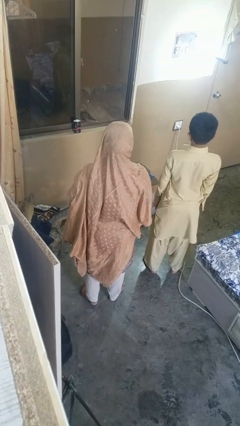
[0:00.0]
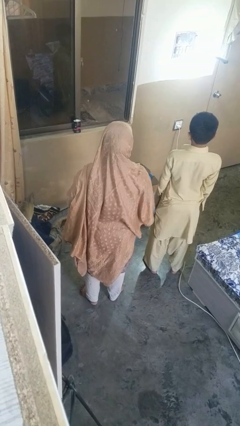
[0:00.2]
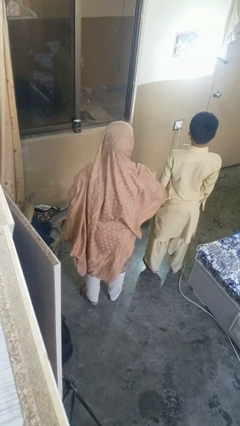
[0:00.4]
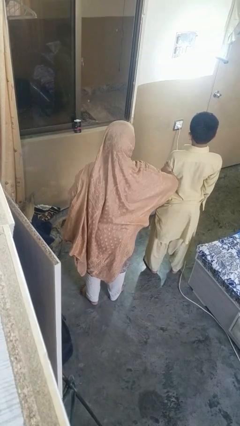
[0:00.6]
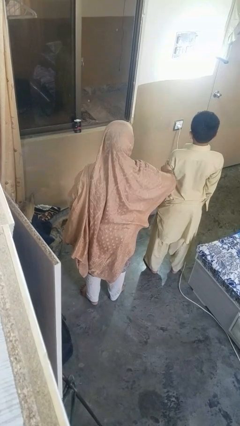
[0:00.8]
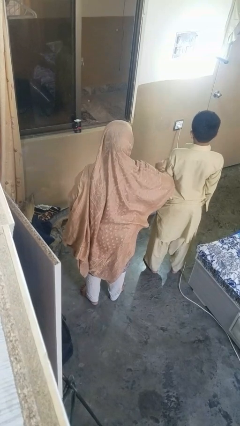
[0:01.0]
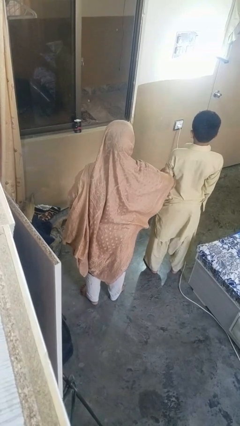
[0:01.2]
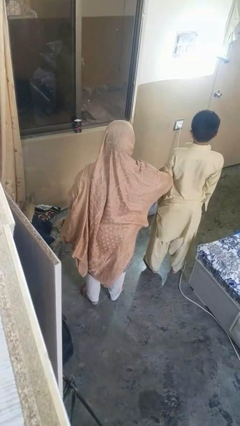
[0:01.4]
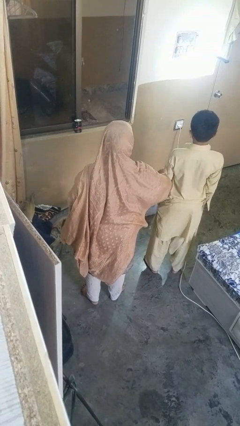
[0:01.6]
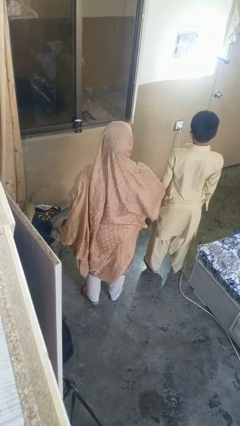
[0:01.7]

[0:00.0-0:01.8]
person grabs person by bicep

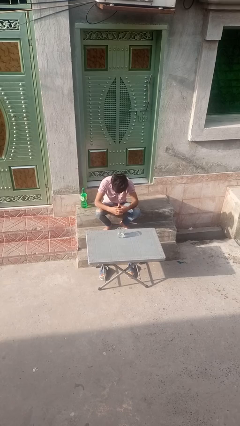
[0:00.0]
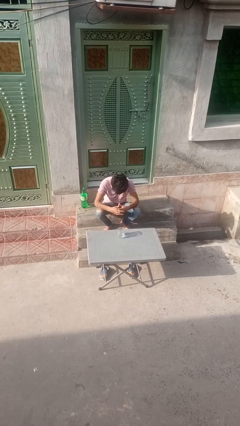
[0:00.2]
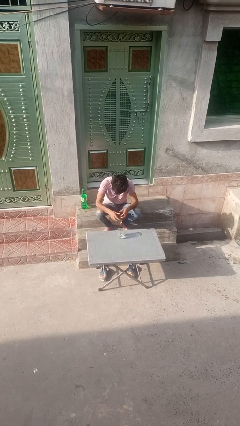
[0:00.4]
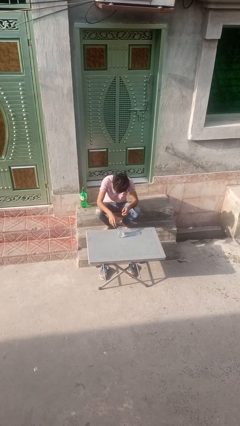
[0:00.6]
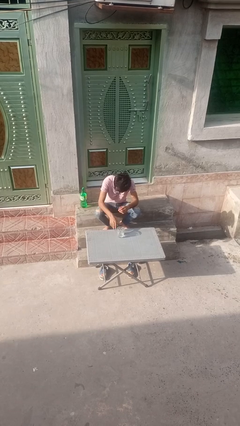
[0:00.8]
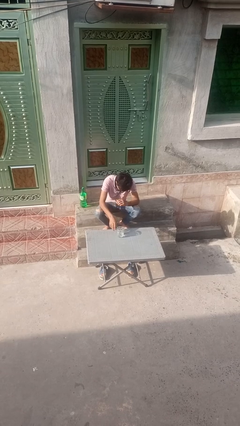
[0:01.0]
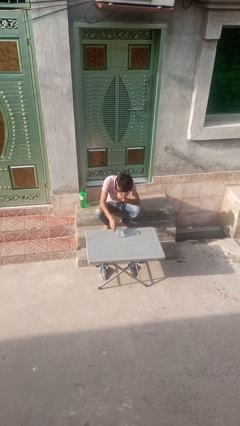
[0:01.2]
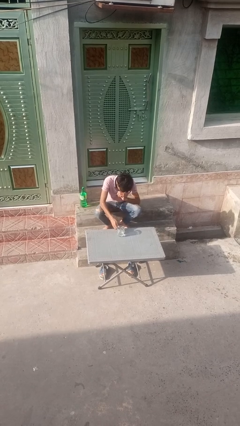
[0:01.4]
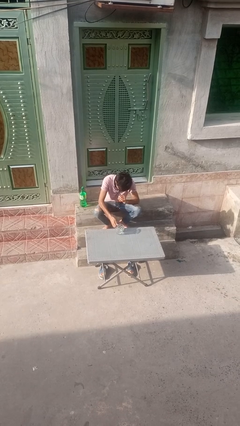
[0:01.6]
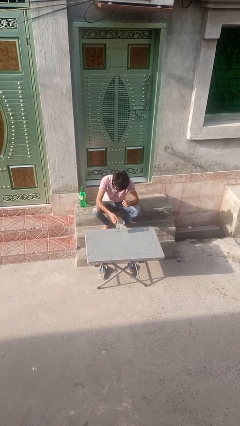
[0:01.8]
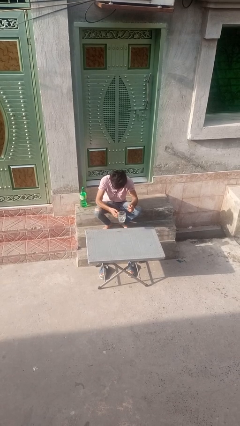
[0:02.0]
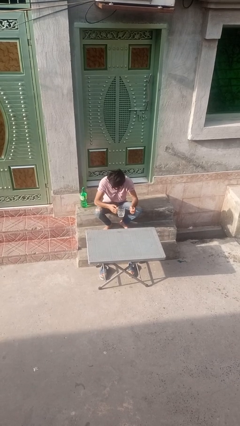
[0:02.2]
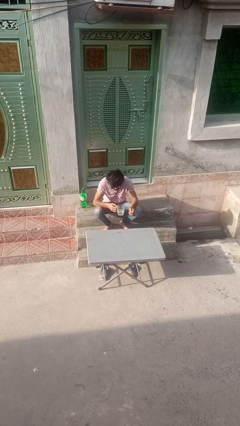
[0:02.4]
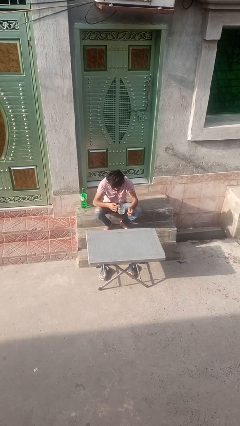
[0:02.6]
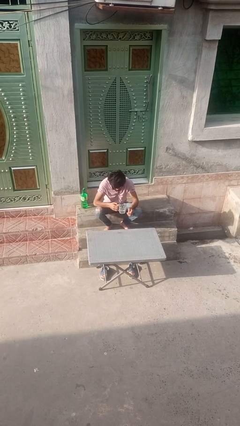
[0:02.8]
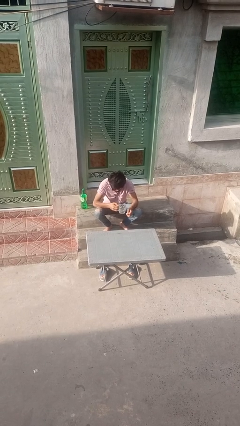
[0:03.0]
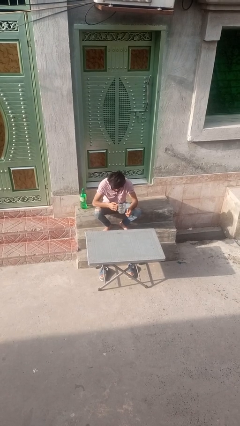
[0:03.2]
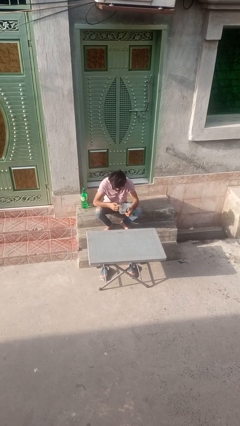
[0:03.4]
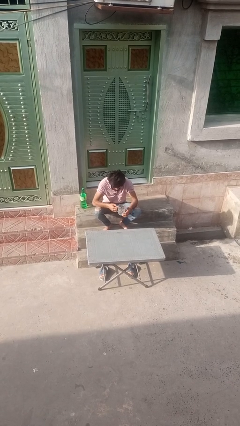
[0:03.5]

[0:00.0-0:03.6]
person picks up object from table

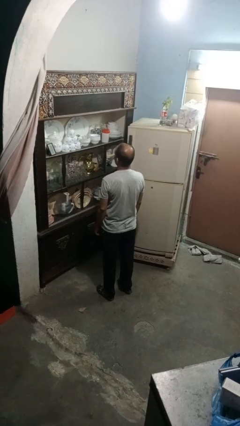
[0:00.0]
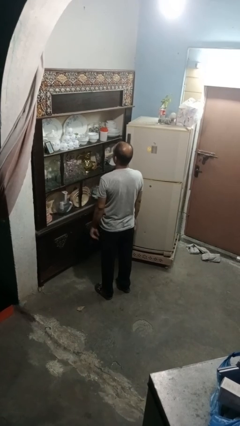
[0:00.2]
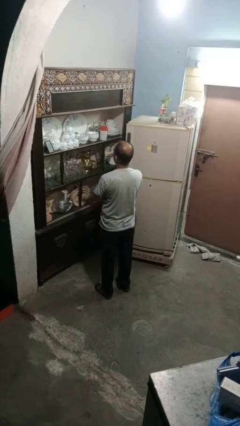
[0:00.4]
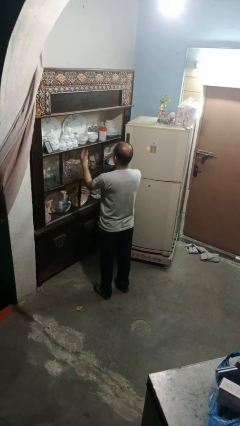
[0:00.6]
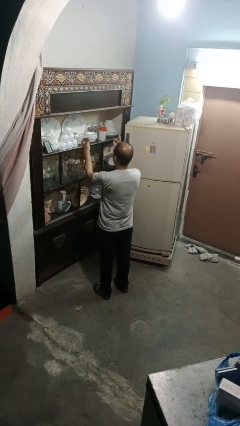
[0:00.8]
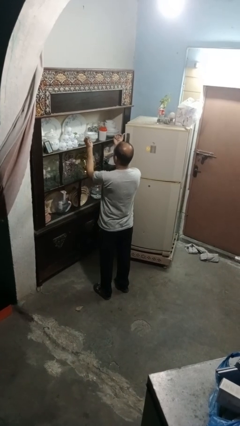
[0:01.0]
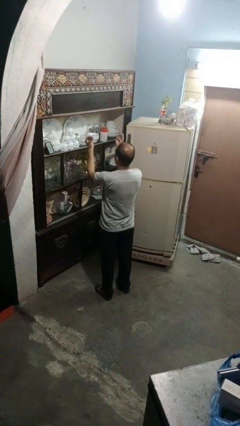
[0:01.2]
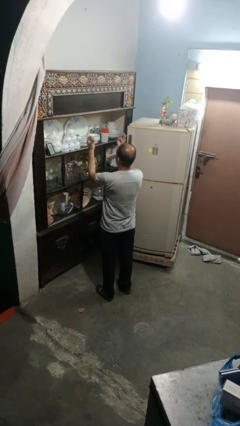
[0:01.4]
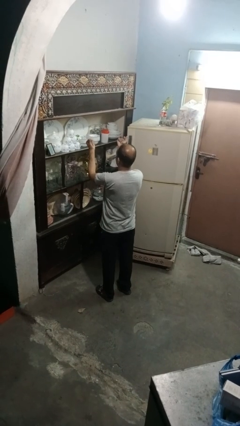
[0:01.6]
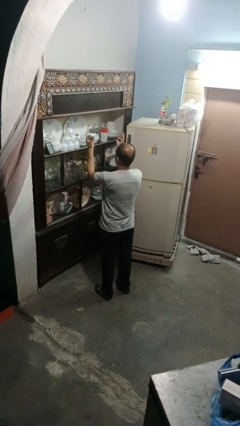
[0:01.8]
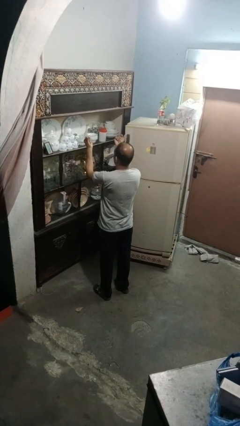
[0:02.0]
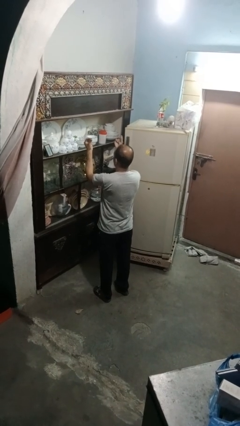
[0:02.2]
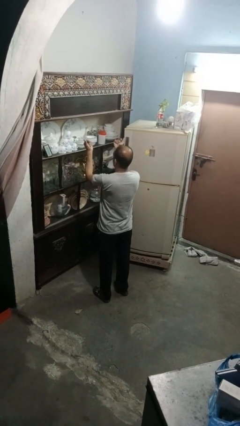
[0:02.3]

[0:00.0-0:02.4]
person snaps fingers

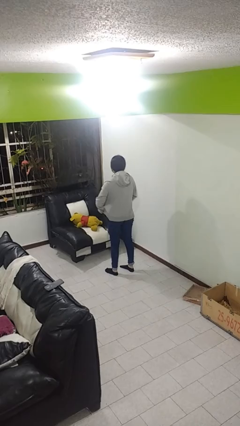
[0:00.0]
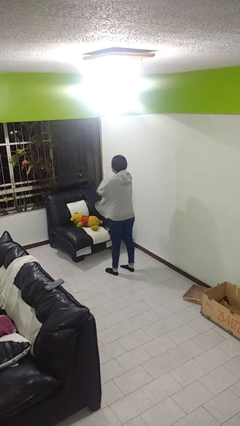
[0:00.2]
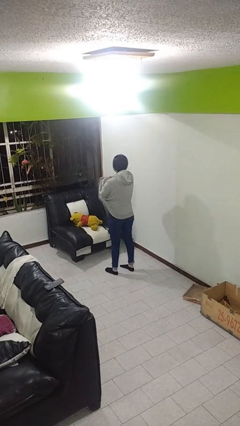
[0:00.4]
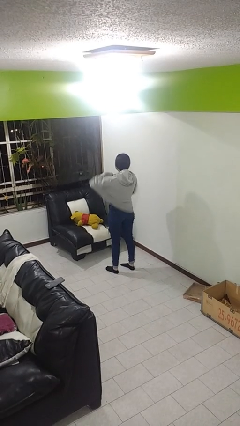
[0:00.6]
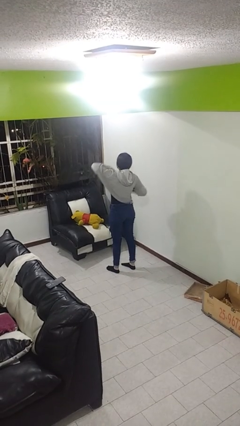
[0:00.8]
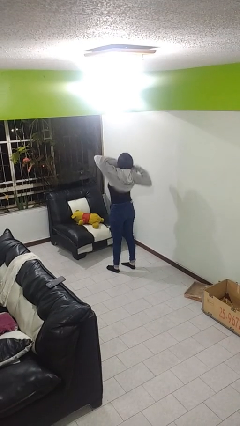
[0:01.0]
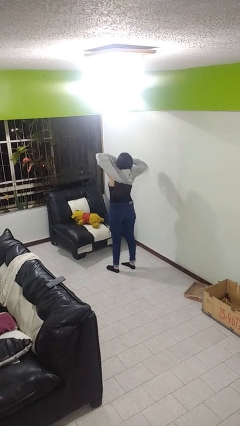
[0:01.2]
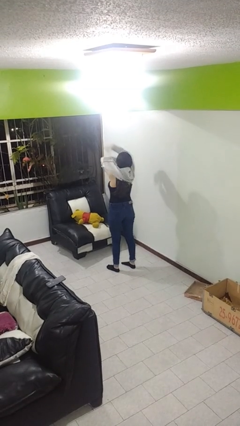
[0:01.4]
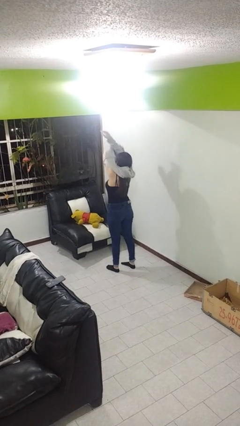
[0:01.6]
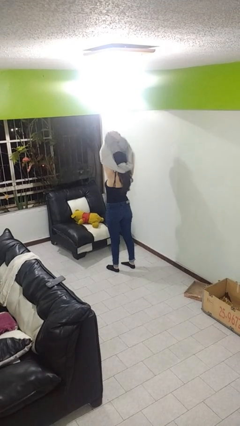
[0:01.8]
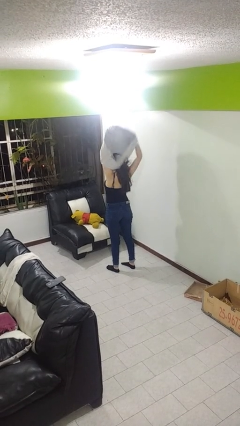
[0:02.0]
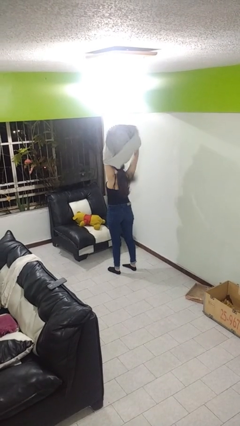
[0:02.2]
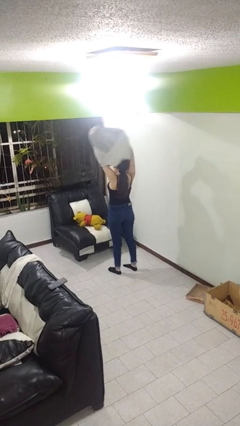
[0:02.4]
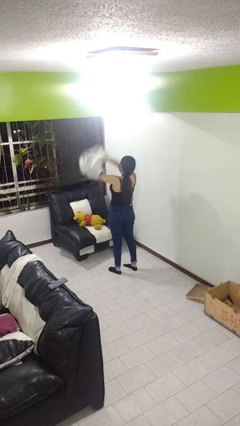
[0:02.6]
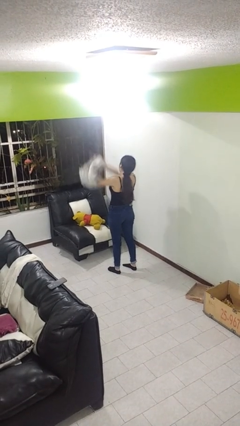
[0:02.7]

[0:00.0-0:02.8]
person takes off hoodie

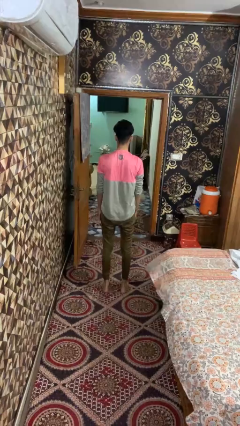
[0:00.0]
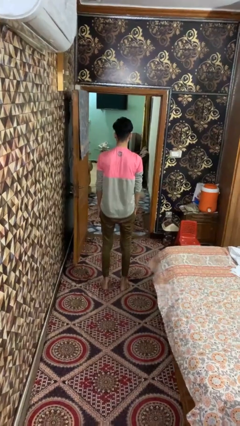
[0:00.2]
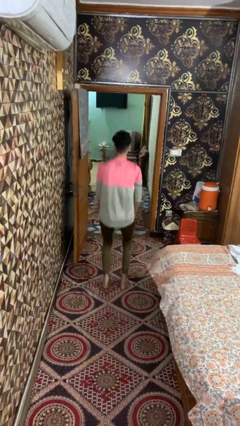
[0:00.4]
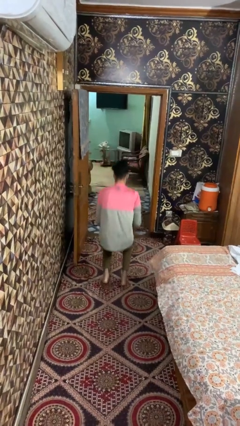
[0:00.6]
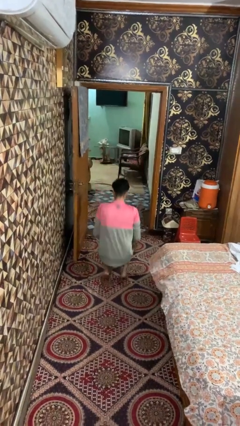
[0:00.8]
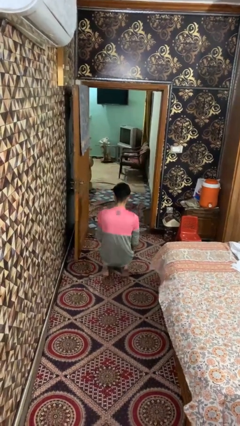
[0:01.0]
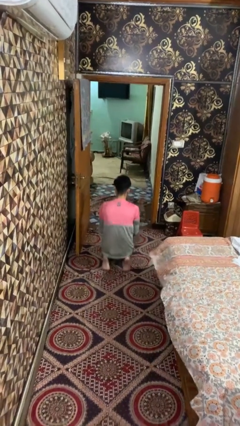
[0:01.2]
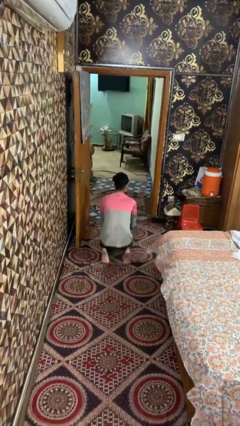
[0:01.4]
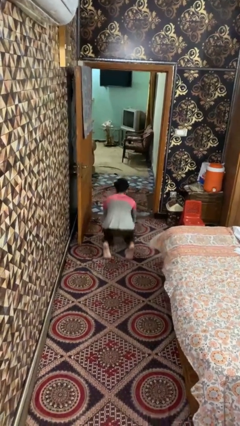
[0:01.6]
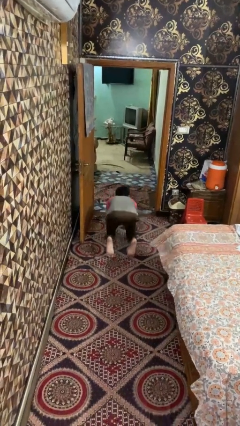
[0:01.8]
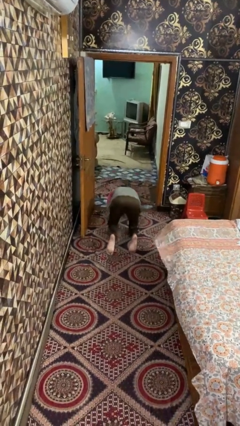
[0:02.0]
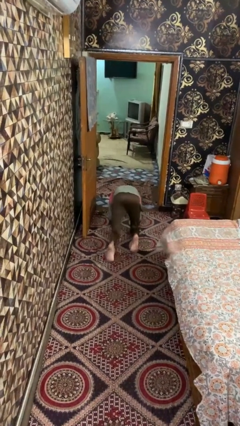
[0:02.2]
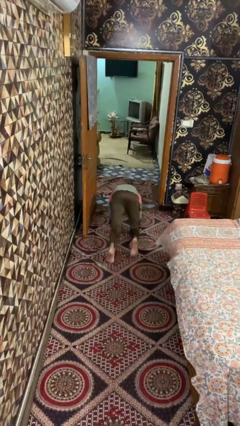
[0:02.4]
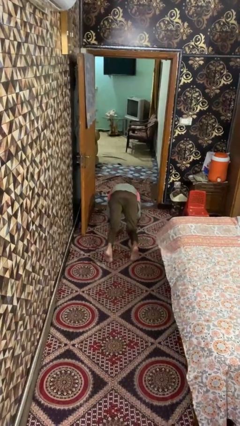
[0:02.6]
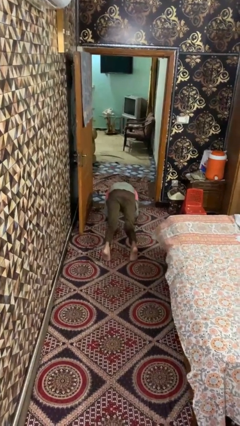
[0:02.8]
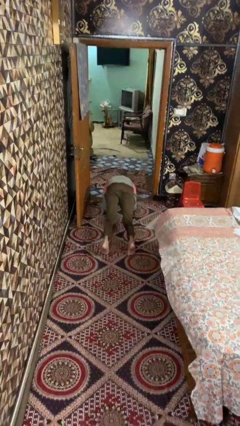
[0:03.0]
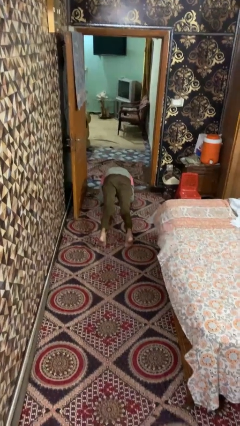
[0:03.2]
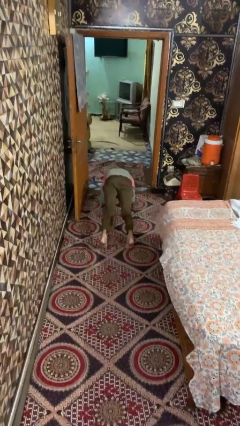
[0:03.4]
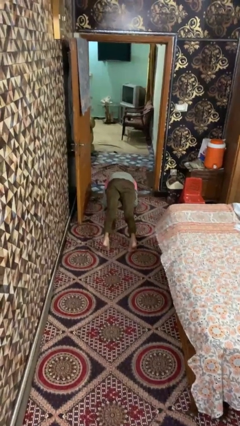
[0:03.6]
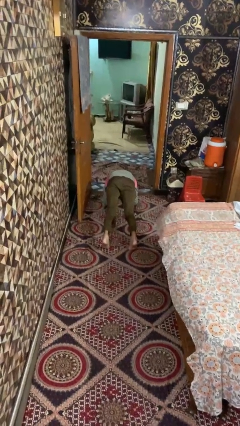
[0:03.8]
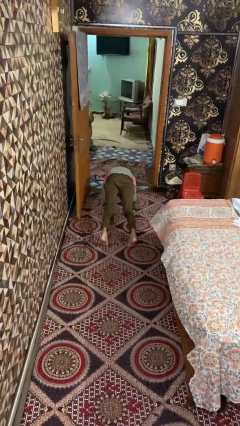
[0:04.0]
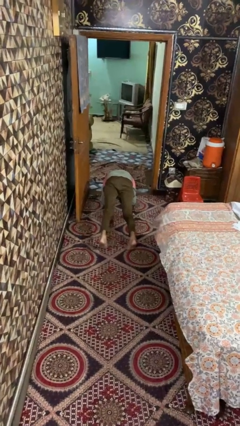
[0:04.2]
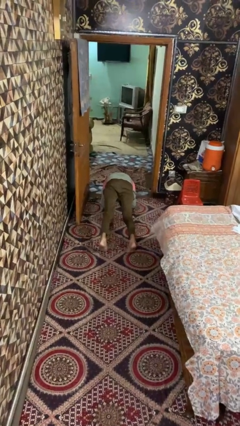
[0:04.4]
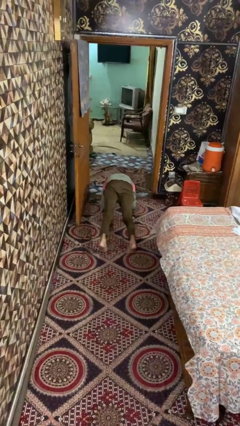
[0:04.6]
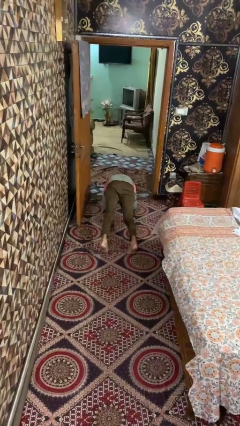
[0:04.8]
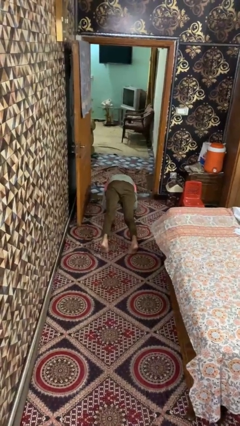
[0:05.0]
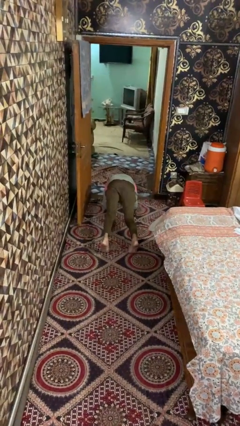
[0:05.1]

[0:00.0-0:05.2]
person exercises with plank

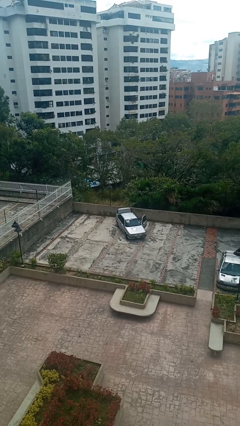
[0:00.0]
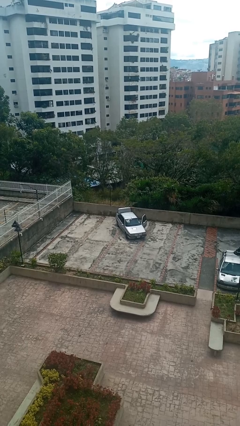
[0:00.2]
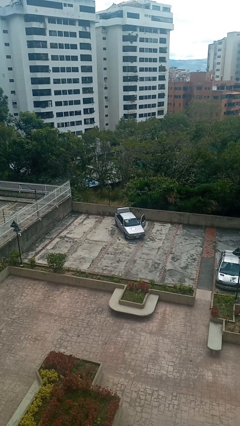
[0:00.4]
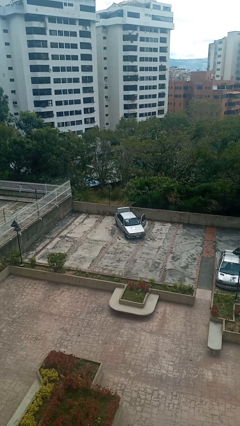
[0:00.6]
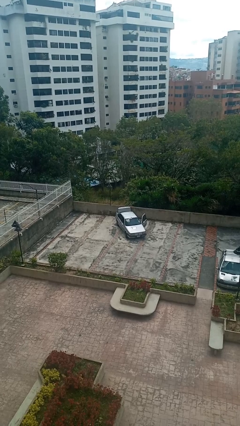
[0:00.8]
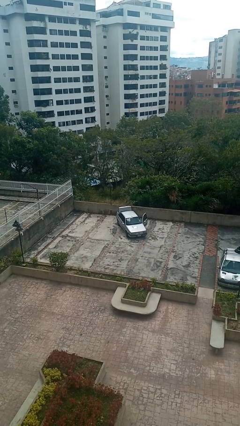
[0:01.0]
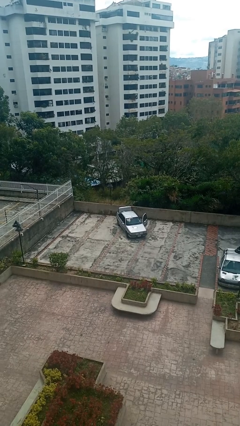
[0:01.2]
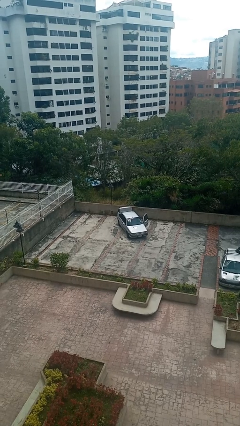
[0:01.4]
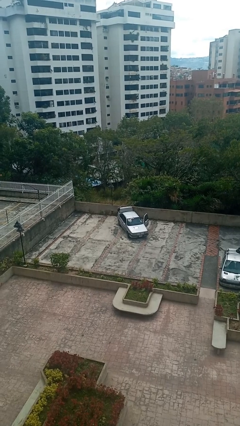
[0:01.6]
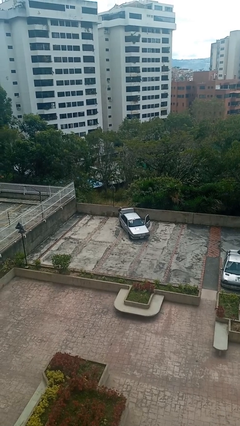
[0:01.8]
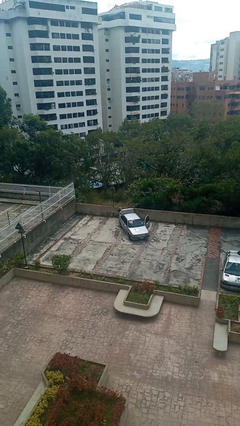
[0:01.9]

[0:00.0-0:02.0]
person unloads car
